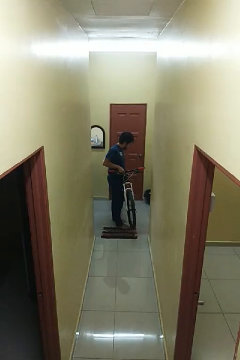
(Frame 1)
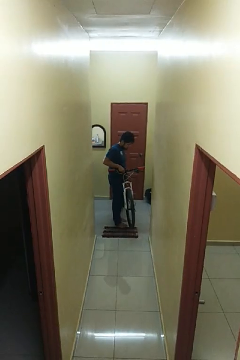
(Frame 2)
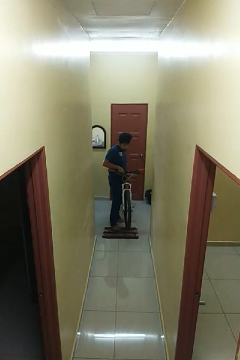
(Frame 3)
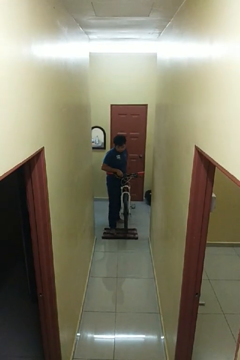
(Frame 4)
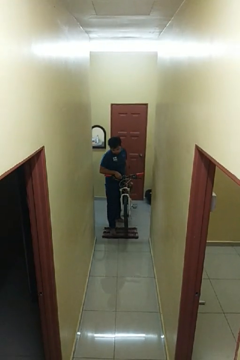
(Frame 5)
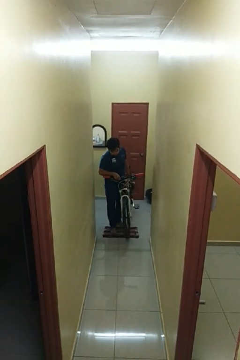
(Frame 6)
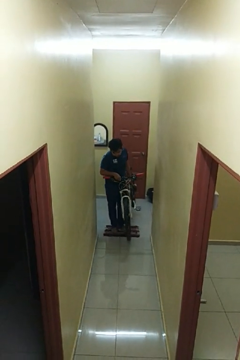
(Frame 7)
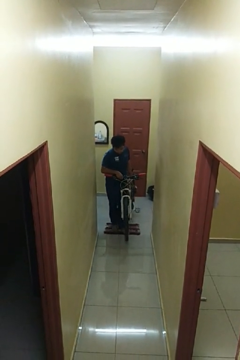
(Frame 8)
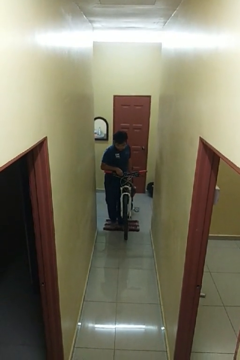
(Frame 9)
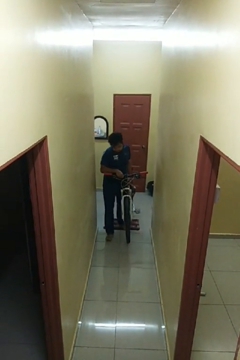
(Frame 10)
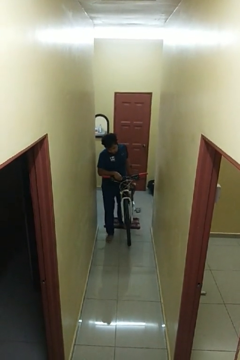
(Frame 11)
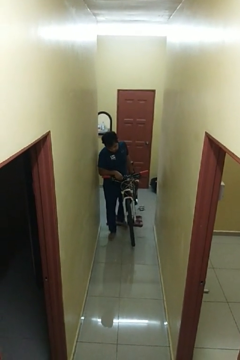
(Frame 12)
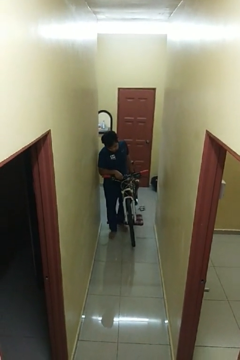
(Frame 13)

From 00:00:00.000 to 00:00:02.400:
person carries bicycle

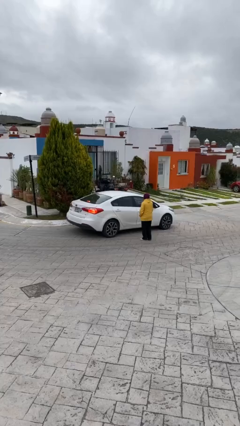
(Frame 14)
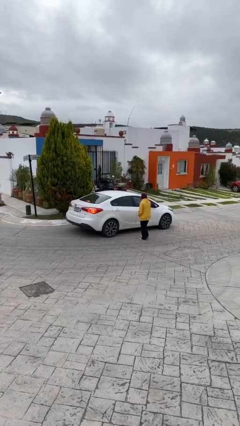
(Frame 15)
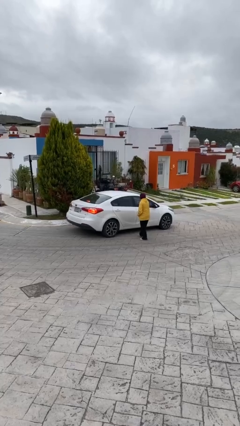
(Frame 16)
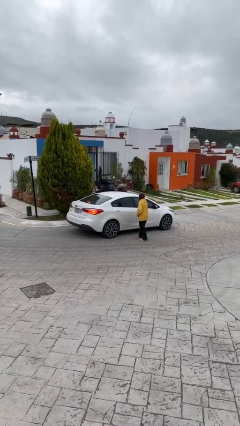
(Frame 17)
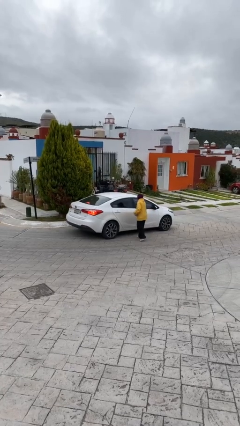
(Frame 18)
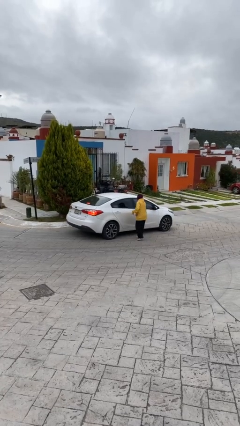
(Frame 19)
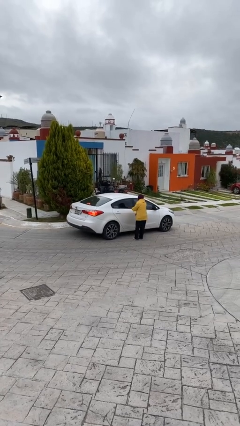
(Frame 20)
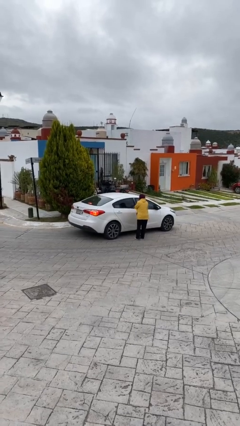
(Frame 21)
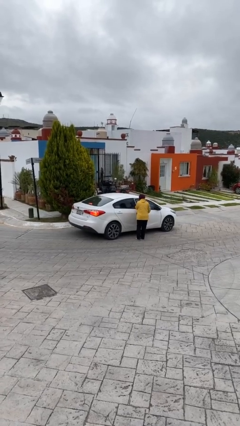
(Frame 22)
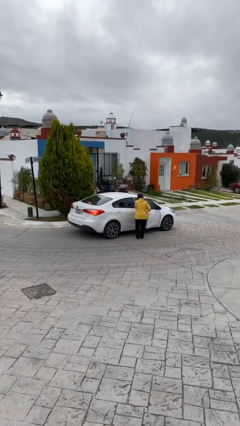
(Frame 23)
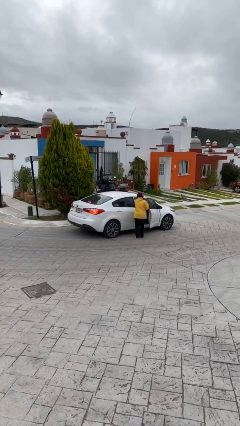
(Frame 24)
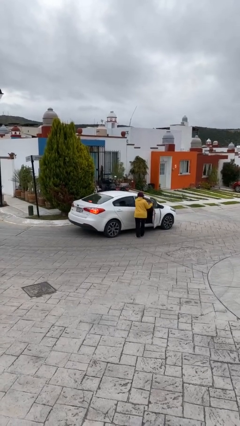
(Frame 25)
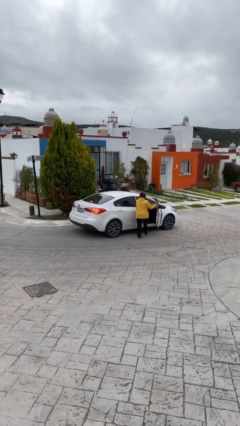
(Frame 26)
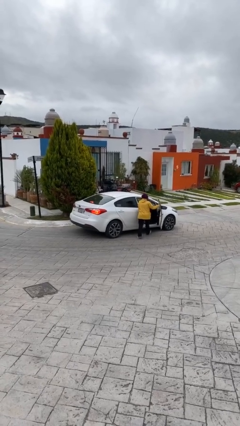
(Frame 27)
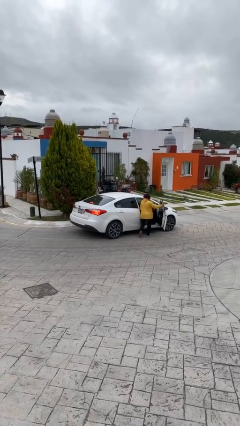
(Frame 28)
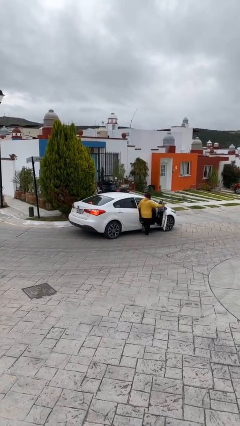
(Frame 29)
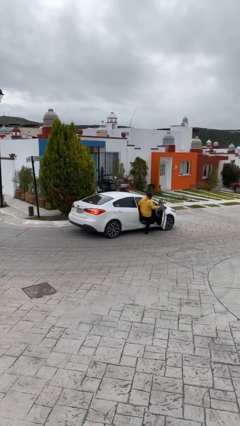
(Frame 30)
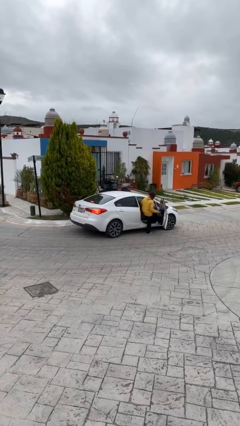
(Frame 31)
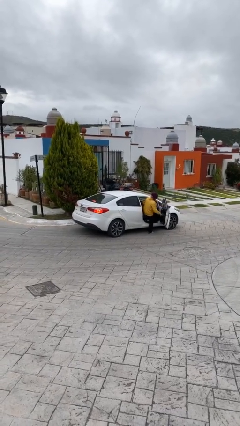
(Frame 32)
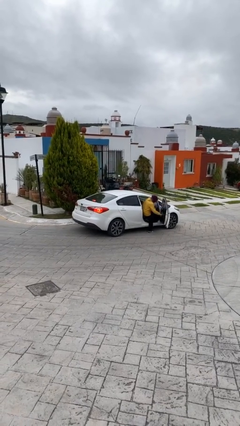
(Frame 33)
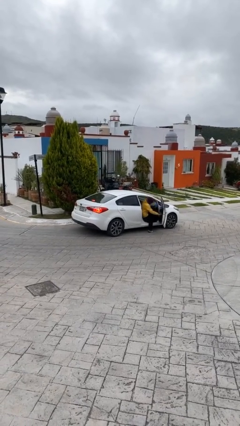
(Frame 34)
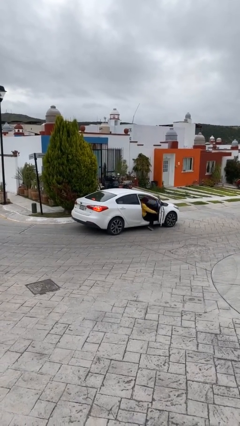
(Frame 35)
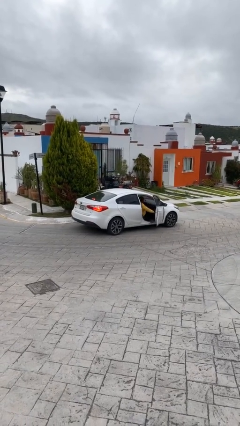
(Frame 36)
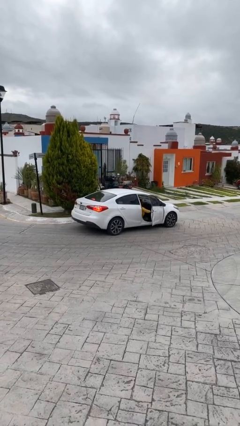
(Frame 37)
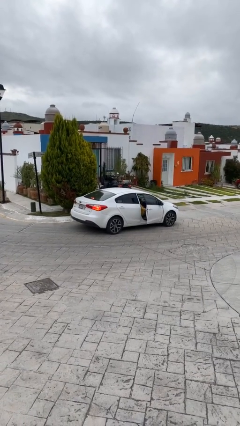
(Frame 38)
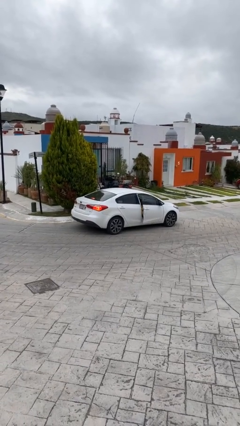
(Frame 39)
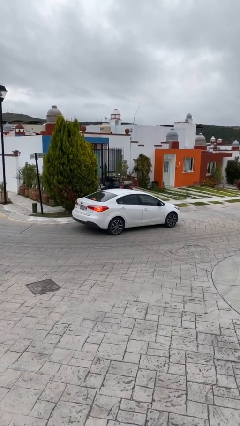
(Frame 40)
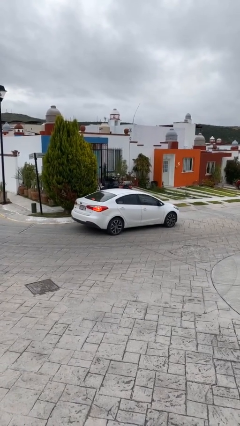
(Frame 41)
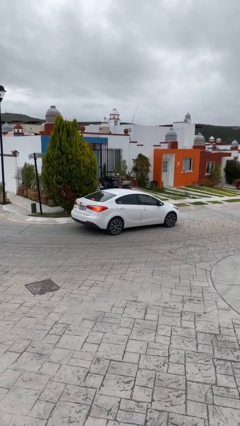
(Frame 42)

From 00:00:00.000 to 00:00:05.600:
car picks up person

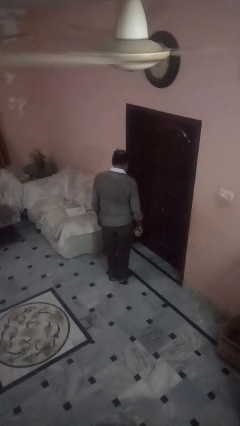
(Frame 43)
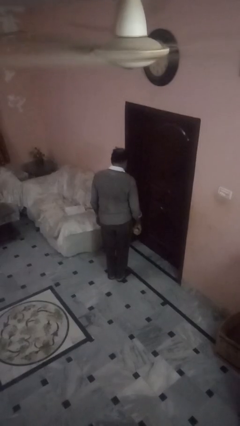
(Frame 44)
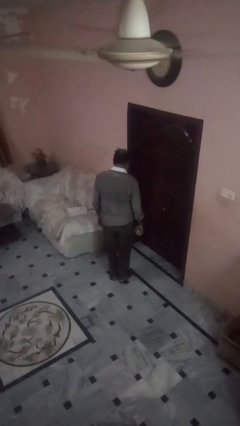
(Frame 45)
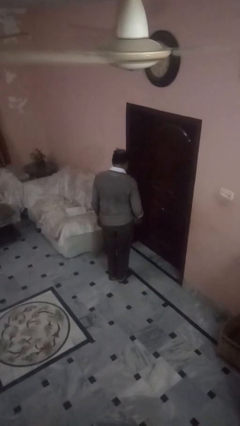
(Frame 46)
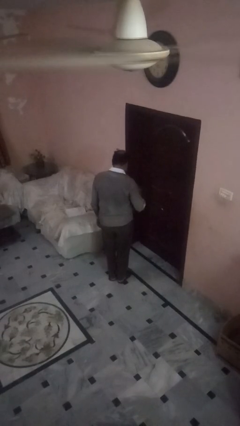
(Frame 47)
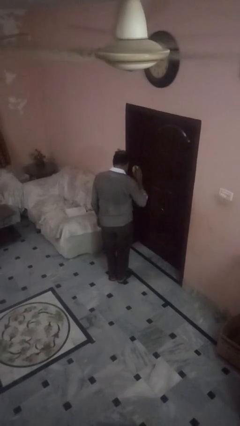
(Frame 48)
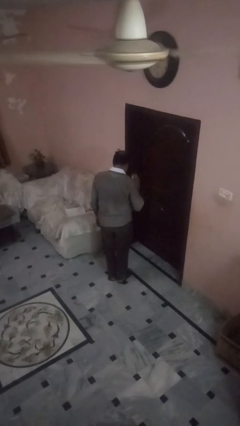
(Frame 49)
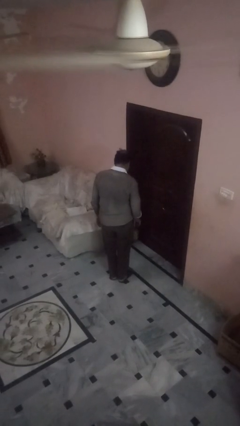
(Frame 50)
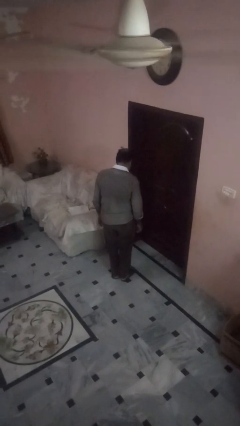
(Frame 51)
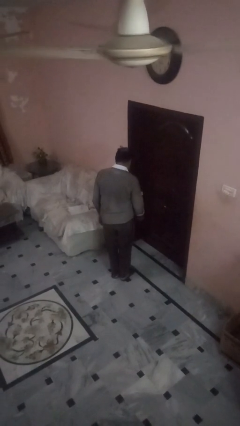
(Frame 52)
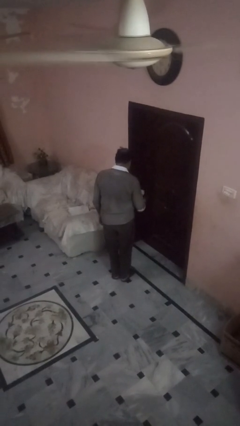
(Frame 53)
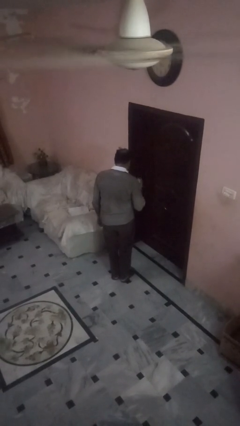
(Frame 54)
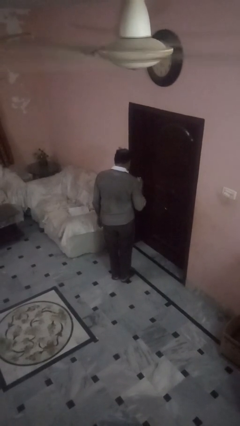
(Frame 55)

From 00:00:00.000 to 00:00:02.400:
person bounces ball on floor

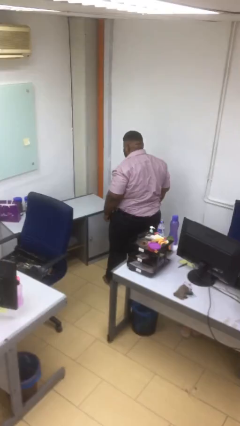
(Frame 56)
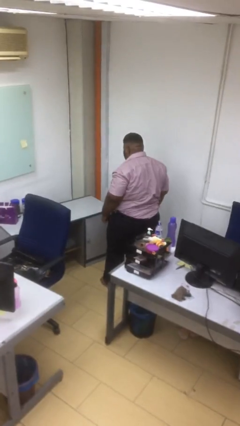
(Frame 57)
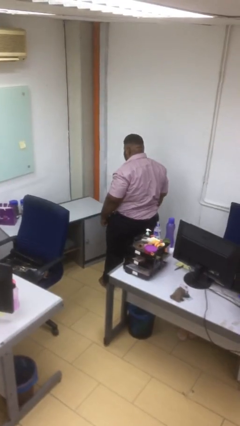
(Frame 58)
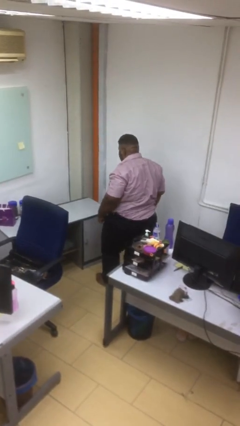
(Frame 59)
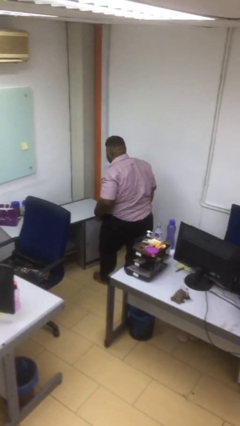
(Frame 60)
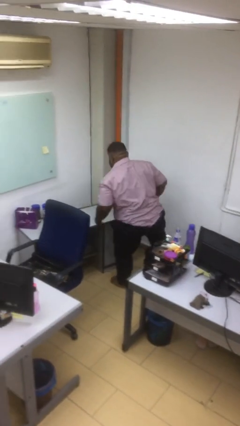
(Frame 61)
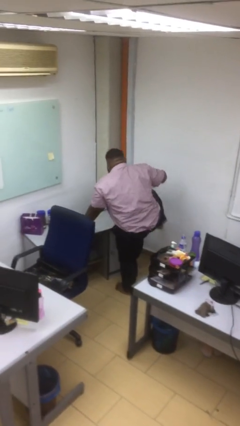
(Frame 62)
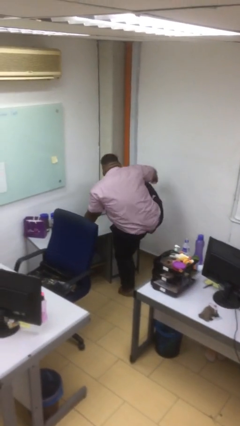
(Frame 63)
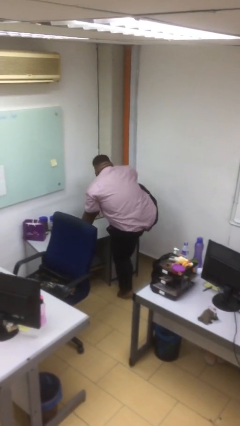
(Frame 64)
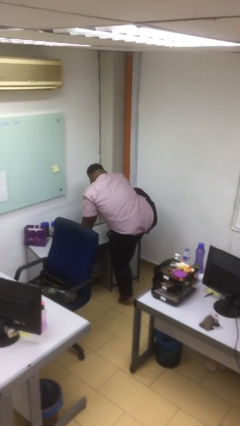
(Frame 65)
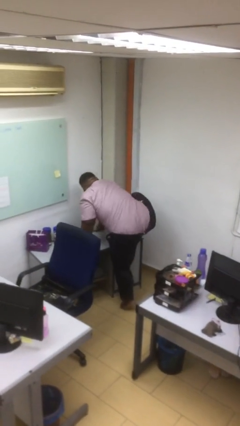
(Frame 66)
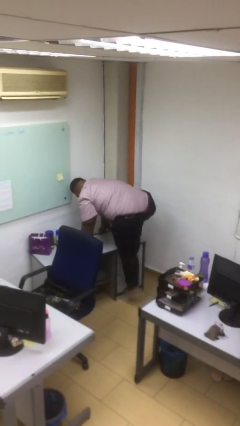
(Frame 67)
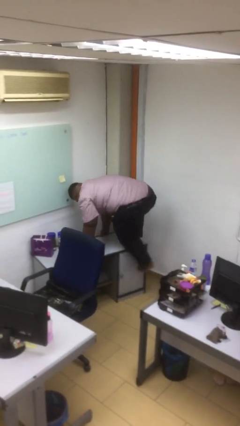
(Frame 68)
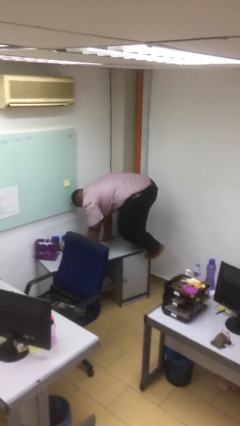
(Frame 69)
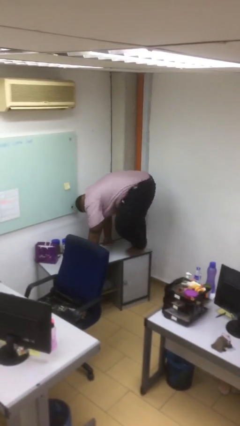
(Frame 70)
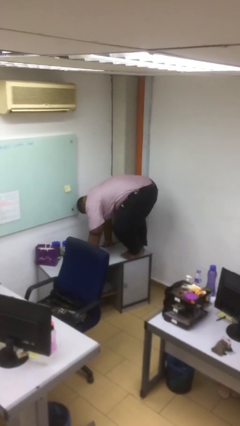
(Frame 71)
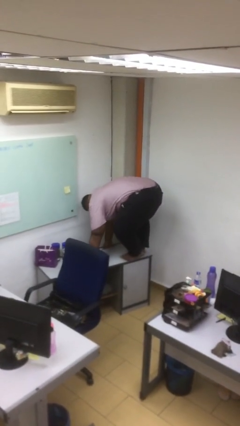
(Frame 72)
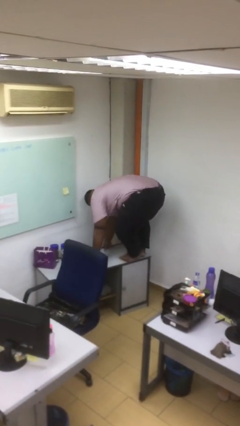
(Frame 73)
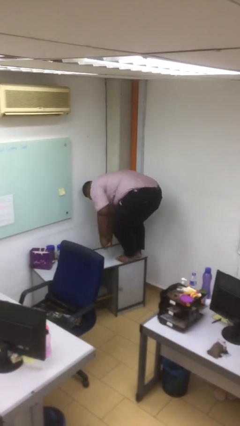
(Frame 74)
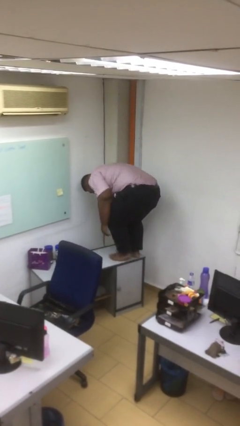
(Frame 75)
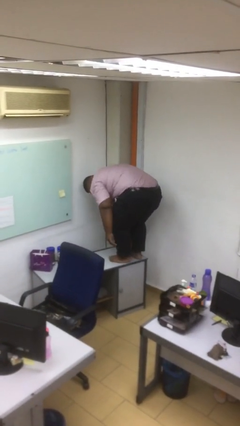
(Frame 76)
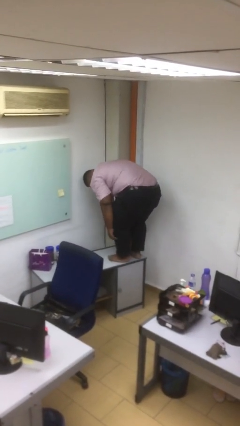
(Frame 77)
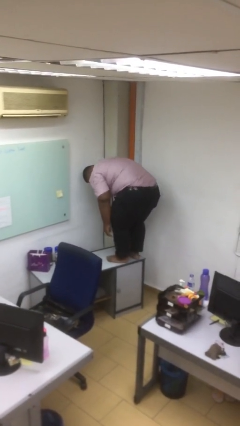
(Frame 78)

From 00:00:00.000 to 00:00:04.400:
person climbs on table

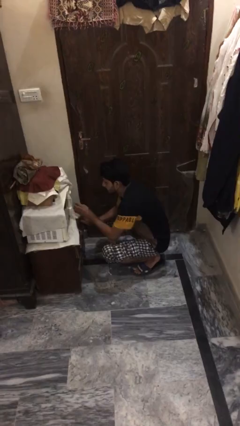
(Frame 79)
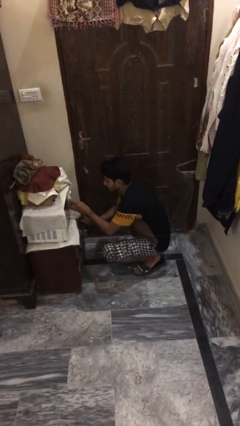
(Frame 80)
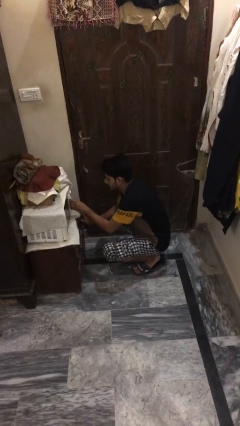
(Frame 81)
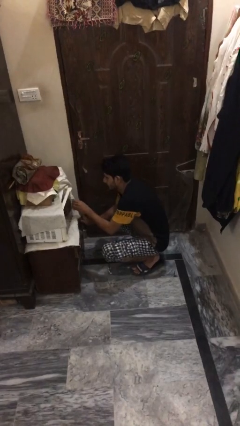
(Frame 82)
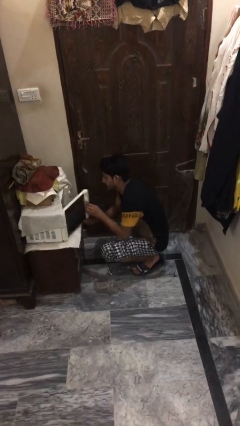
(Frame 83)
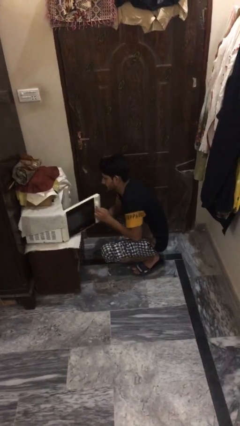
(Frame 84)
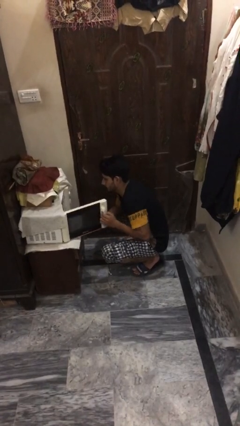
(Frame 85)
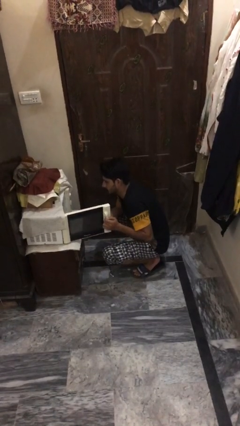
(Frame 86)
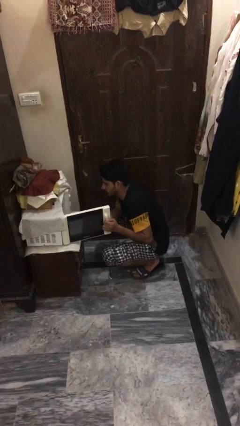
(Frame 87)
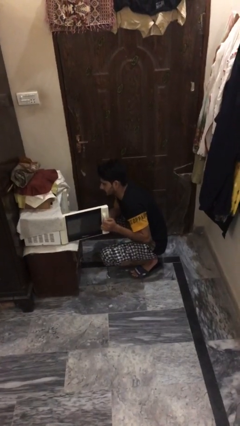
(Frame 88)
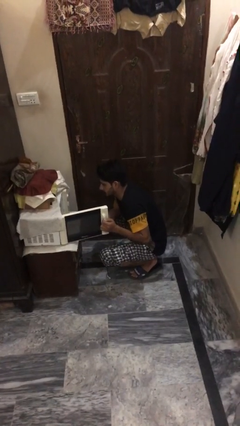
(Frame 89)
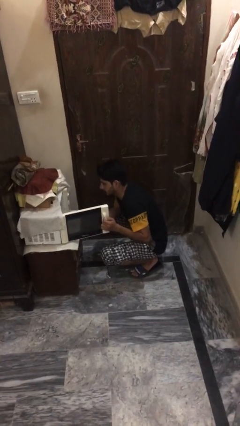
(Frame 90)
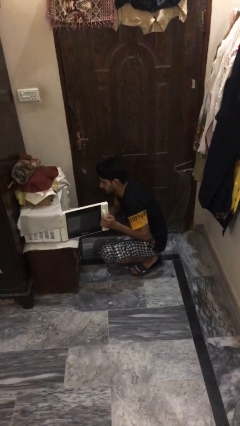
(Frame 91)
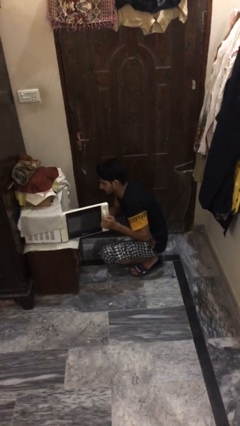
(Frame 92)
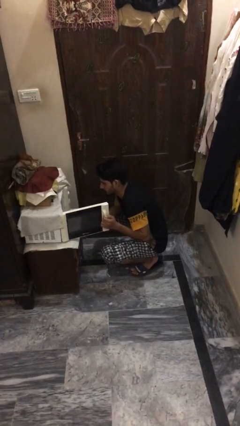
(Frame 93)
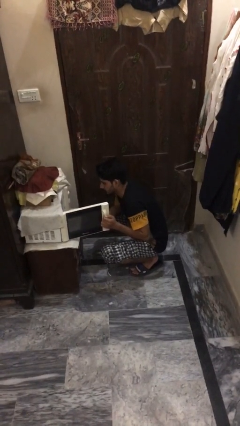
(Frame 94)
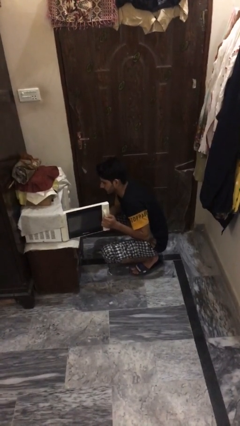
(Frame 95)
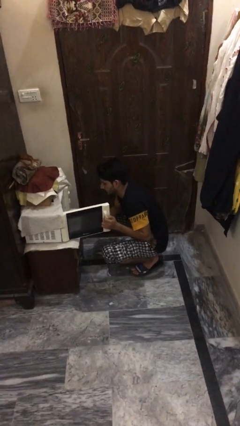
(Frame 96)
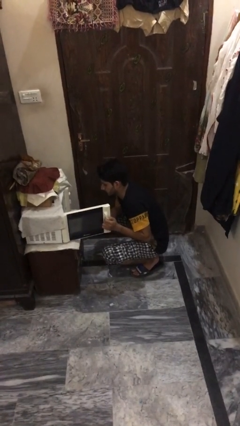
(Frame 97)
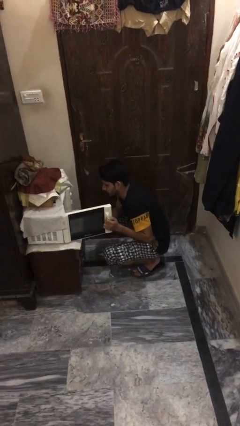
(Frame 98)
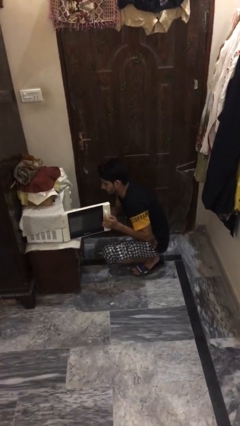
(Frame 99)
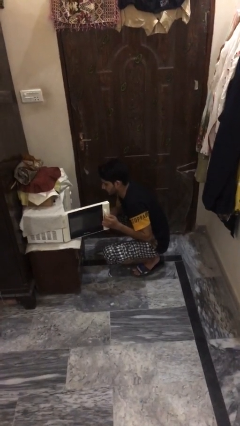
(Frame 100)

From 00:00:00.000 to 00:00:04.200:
person opens microwave
